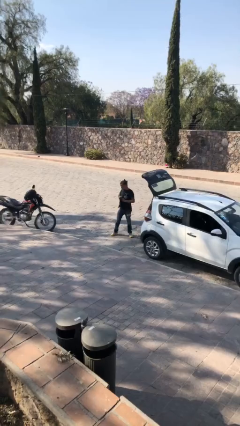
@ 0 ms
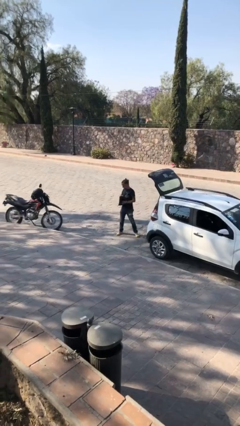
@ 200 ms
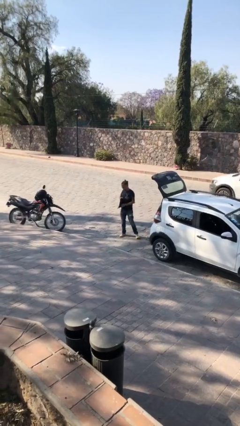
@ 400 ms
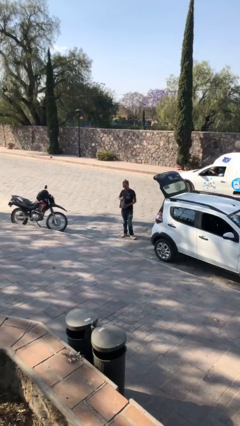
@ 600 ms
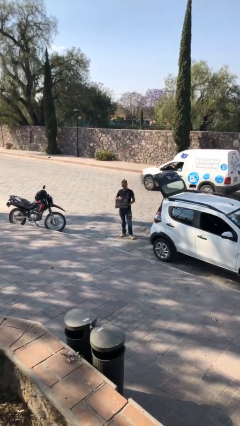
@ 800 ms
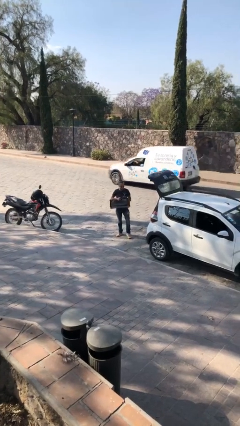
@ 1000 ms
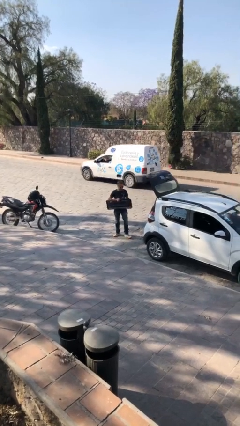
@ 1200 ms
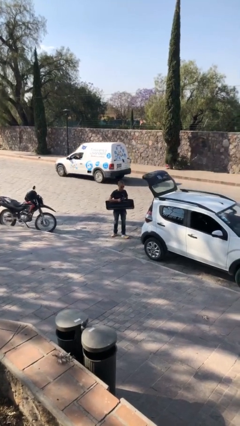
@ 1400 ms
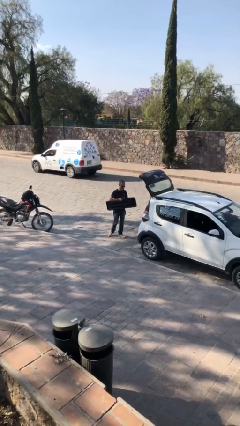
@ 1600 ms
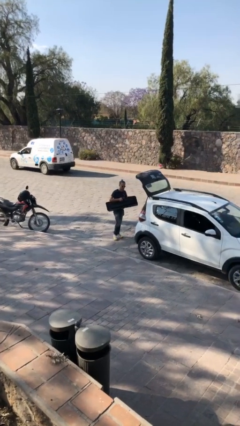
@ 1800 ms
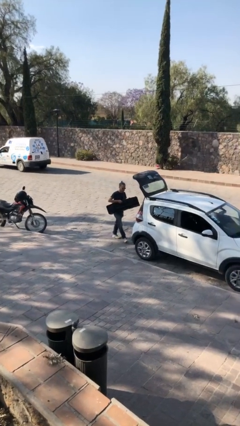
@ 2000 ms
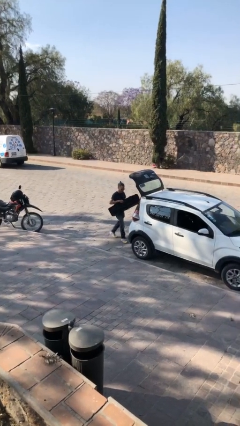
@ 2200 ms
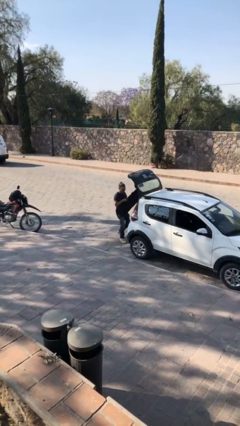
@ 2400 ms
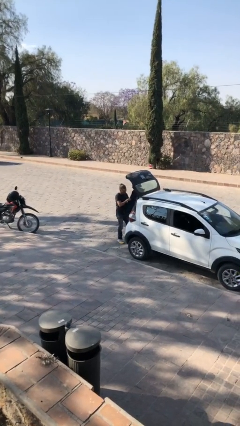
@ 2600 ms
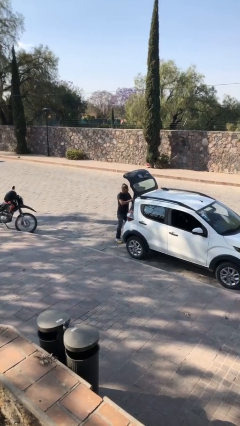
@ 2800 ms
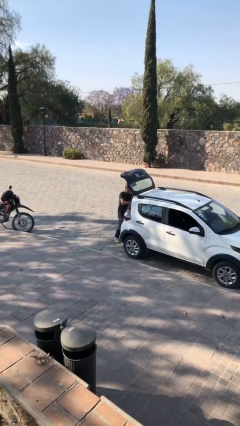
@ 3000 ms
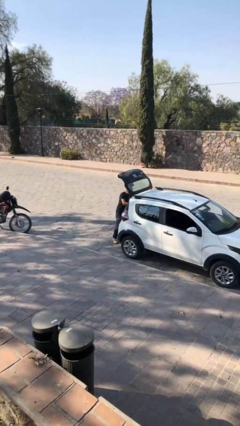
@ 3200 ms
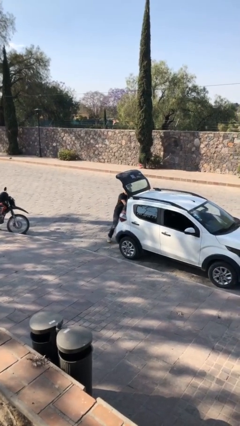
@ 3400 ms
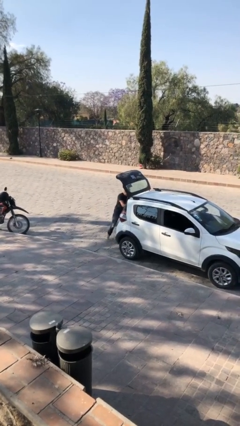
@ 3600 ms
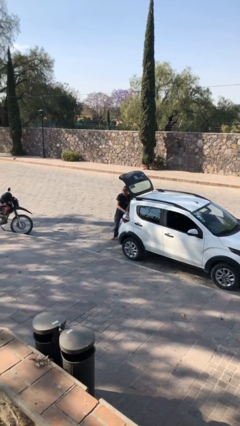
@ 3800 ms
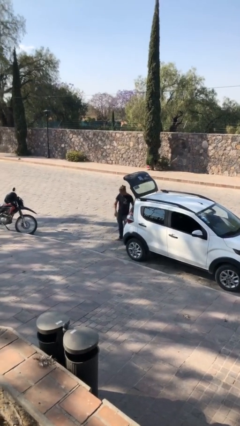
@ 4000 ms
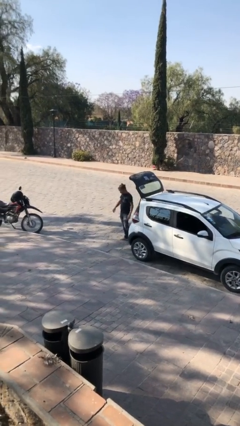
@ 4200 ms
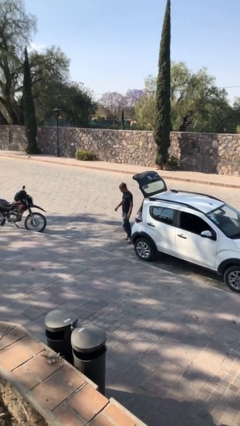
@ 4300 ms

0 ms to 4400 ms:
person loads car

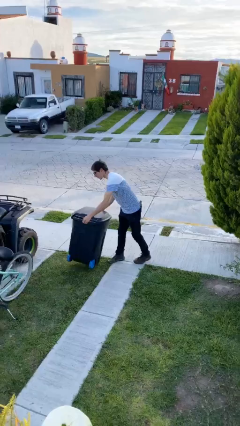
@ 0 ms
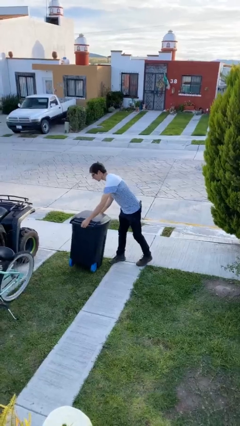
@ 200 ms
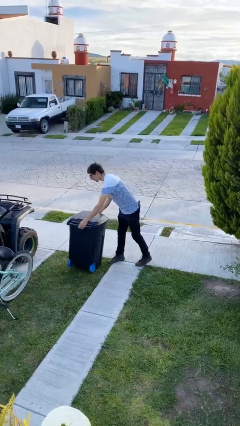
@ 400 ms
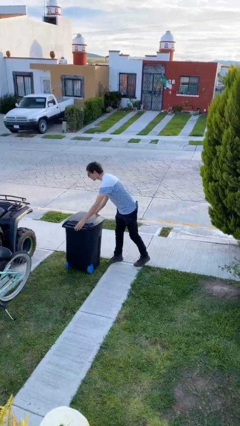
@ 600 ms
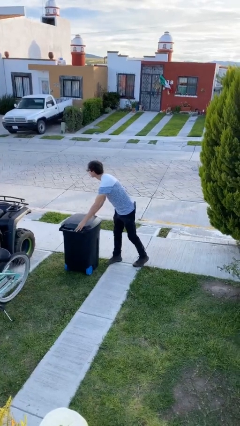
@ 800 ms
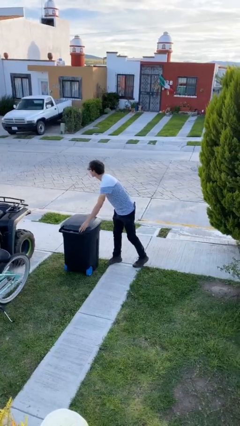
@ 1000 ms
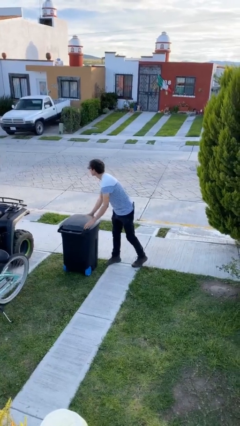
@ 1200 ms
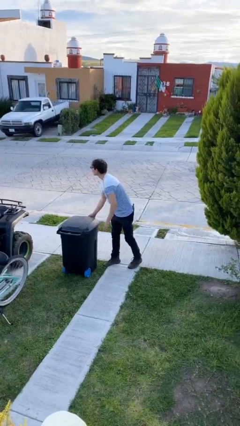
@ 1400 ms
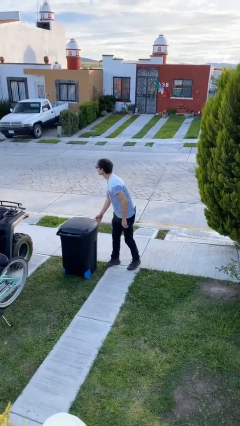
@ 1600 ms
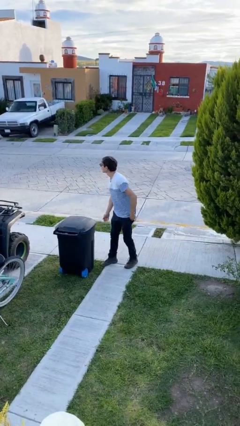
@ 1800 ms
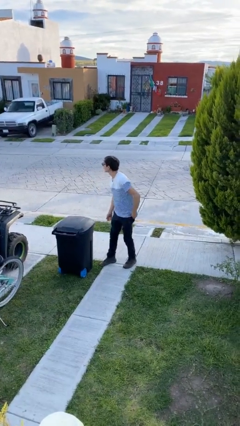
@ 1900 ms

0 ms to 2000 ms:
person puts down object on floor

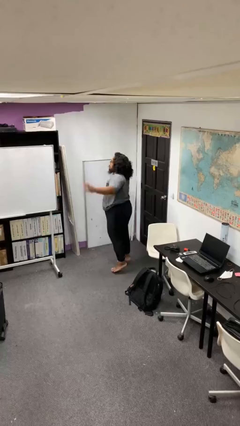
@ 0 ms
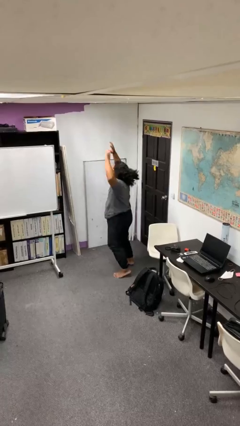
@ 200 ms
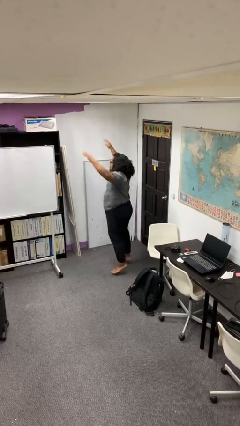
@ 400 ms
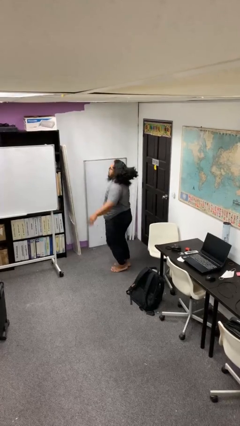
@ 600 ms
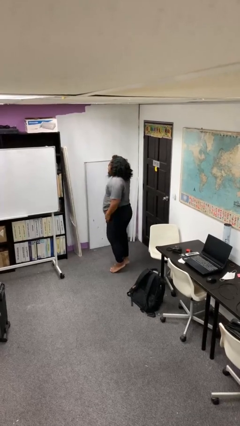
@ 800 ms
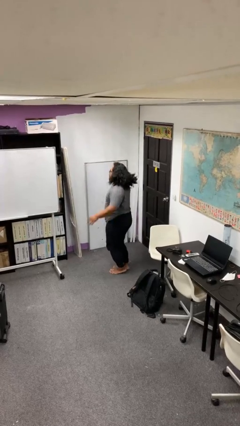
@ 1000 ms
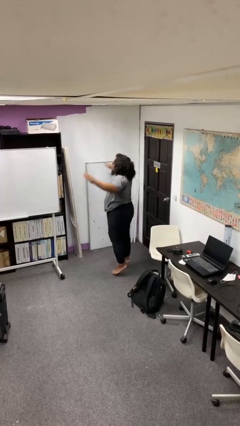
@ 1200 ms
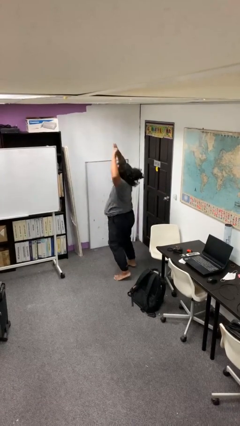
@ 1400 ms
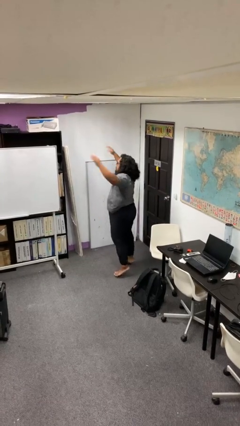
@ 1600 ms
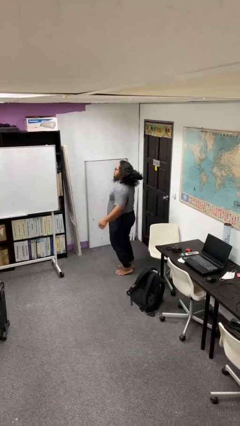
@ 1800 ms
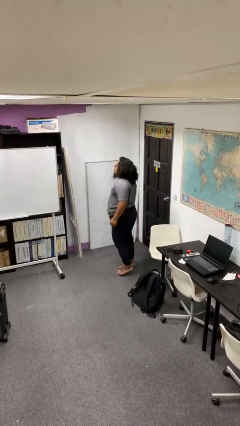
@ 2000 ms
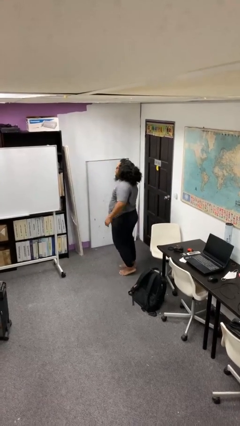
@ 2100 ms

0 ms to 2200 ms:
person exercises with jumping jacks

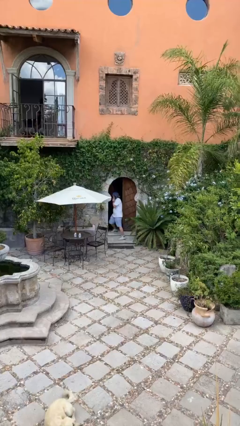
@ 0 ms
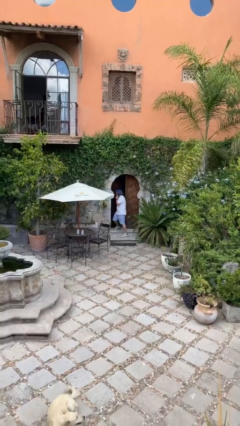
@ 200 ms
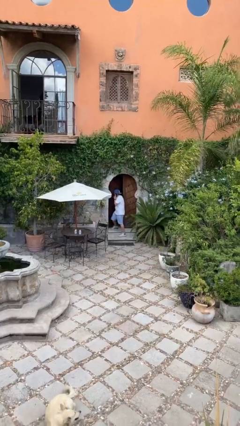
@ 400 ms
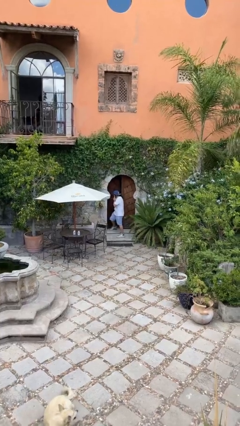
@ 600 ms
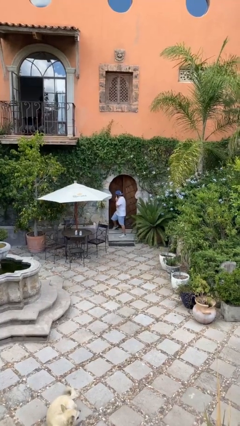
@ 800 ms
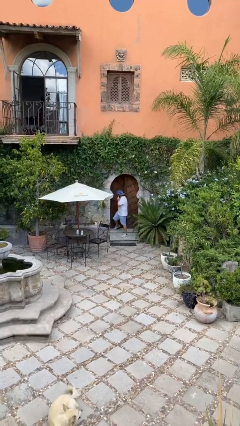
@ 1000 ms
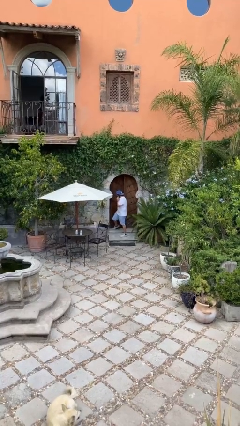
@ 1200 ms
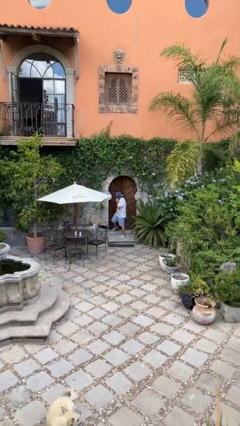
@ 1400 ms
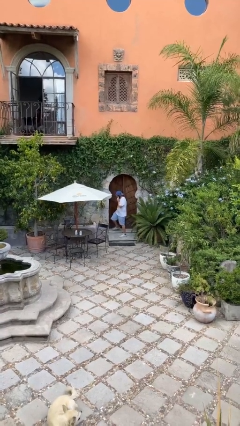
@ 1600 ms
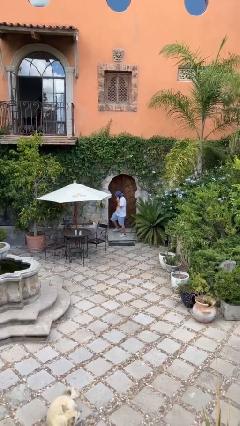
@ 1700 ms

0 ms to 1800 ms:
person closes facility door

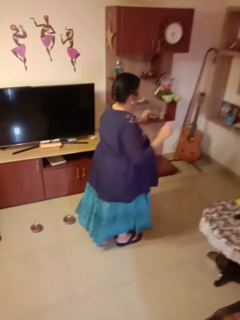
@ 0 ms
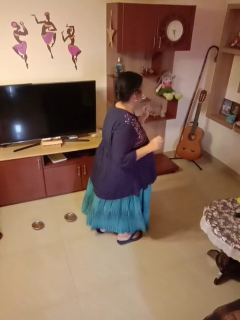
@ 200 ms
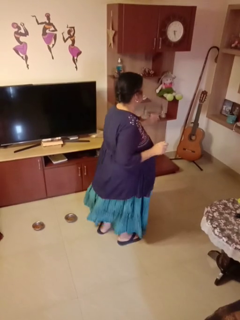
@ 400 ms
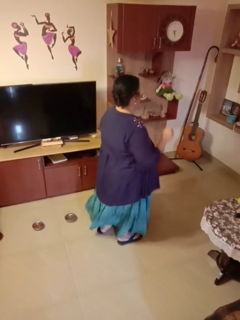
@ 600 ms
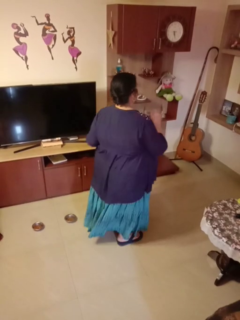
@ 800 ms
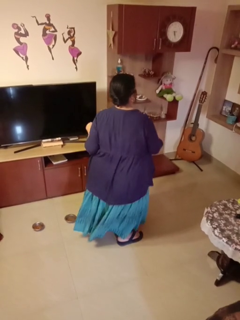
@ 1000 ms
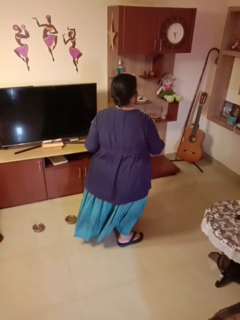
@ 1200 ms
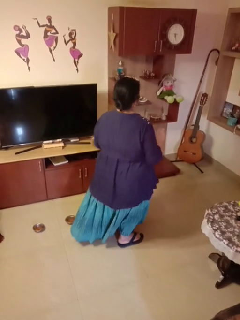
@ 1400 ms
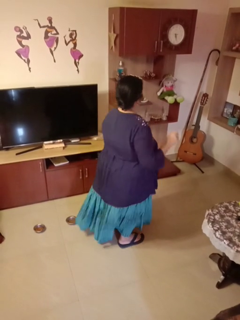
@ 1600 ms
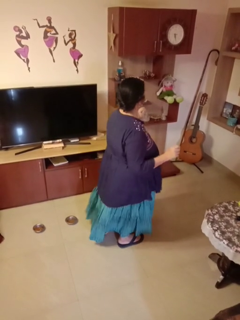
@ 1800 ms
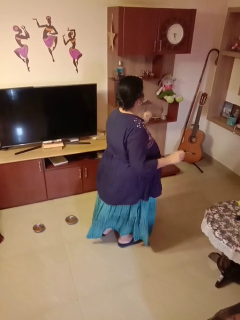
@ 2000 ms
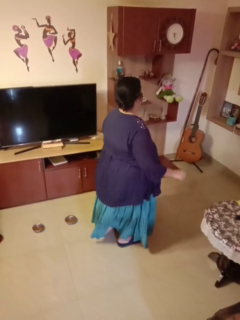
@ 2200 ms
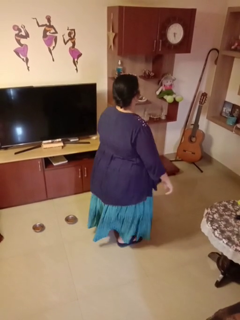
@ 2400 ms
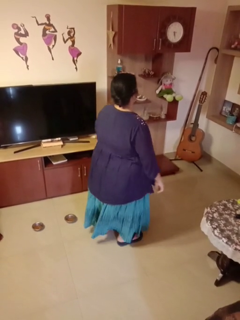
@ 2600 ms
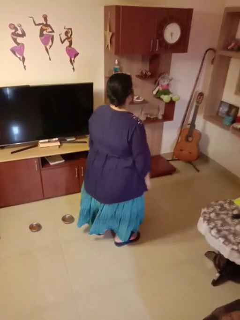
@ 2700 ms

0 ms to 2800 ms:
person dances in place

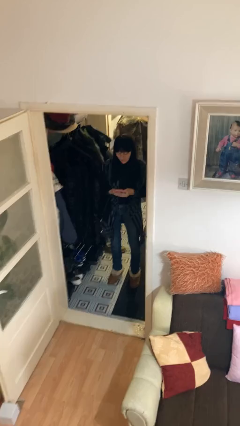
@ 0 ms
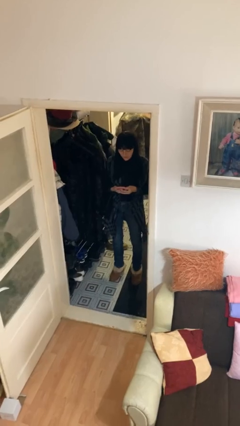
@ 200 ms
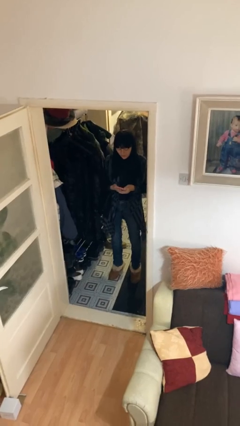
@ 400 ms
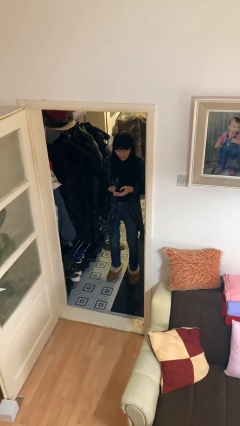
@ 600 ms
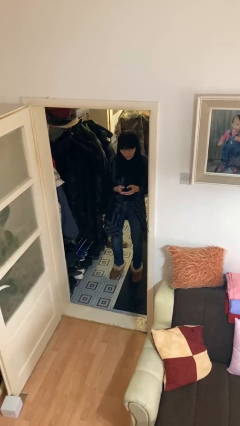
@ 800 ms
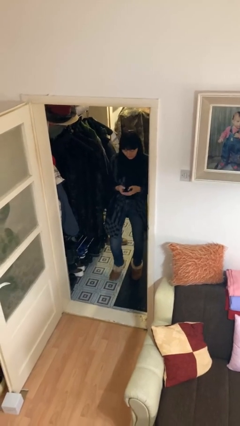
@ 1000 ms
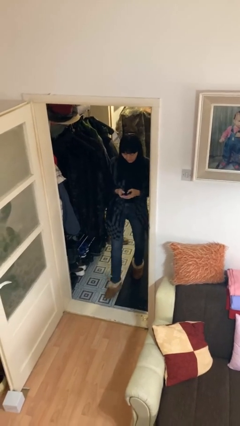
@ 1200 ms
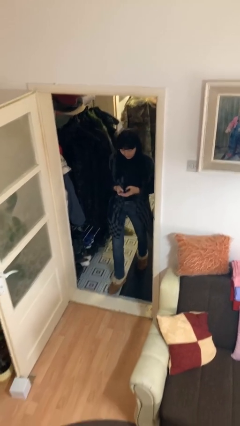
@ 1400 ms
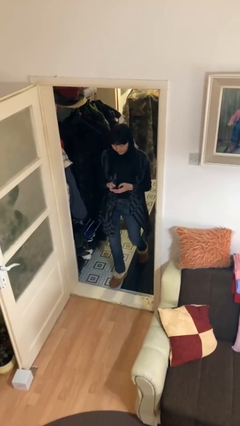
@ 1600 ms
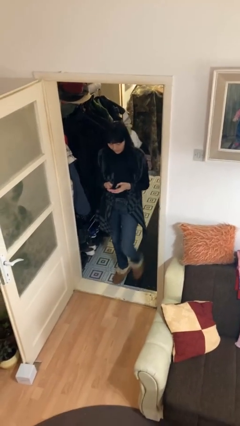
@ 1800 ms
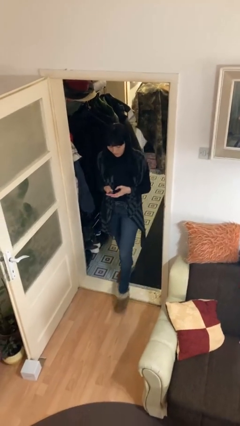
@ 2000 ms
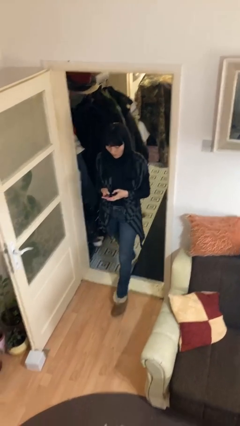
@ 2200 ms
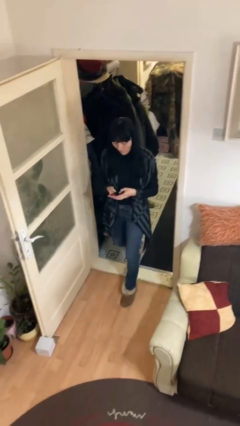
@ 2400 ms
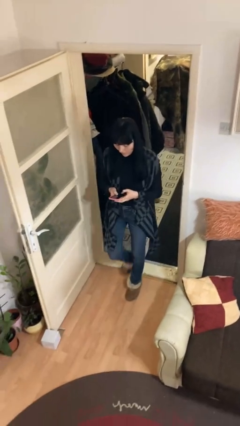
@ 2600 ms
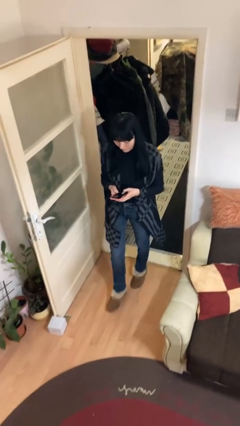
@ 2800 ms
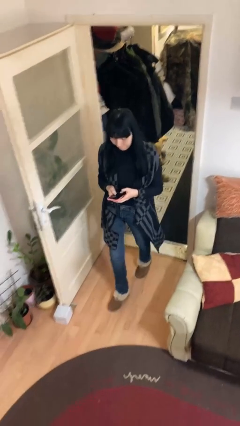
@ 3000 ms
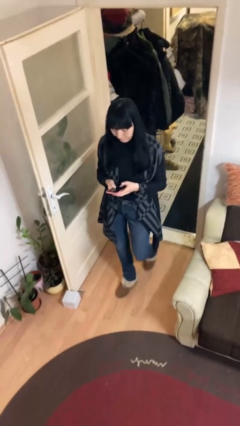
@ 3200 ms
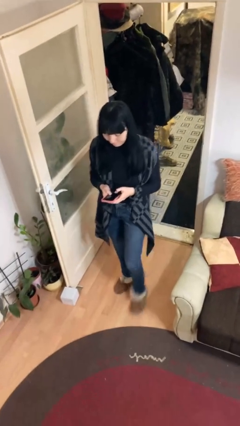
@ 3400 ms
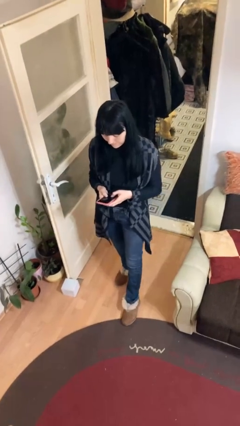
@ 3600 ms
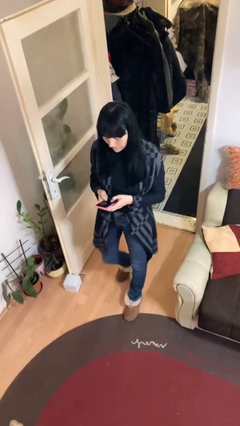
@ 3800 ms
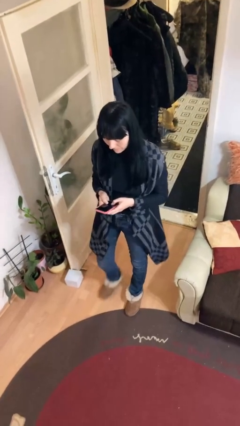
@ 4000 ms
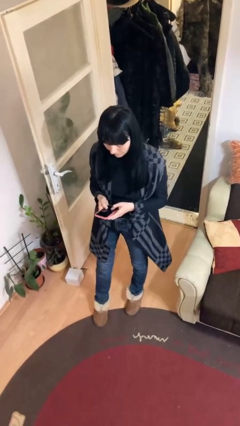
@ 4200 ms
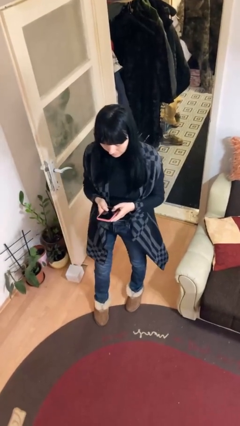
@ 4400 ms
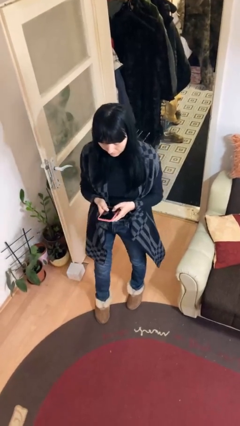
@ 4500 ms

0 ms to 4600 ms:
person enters scene through structure
